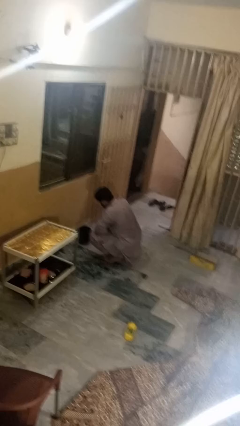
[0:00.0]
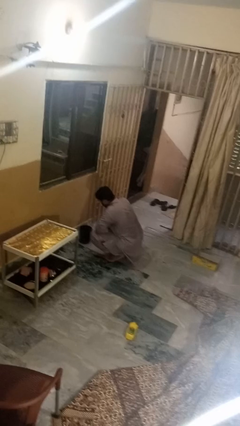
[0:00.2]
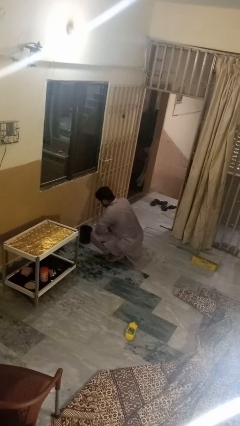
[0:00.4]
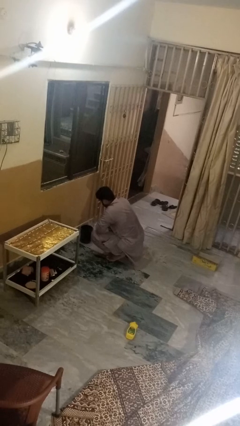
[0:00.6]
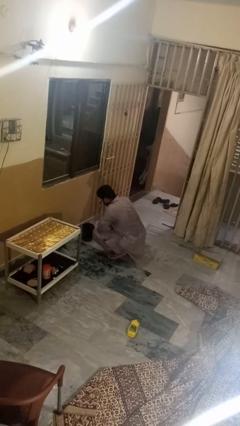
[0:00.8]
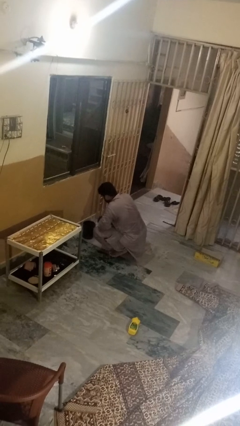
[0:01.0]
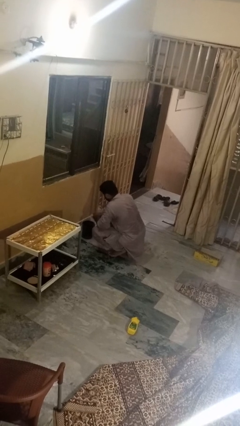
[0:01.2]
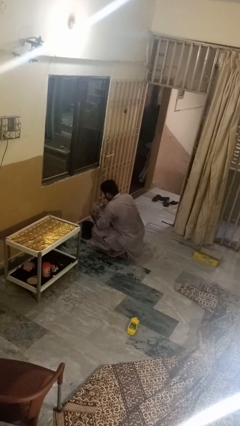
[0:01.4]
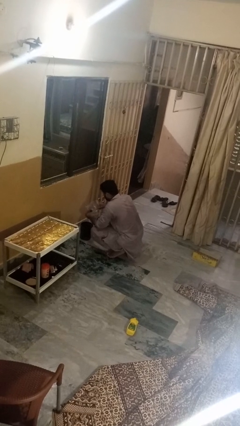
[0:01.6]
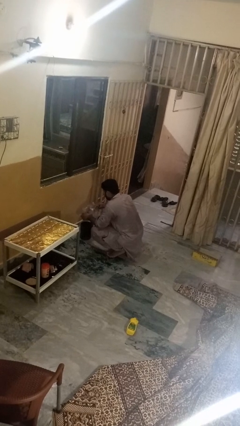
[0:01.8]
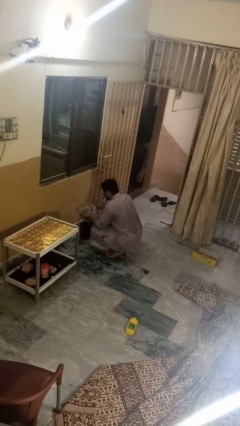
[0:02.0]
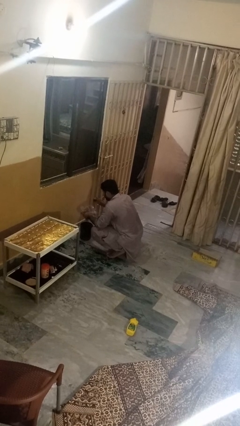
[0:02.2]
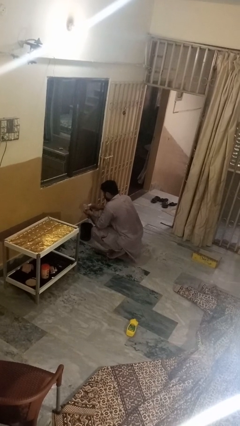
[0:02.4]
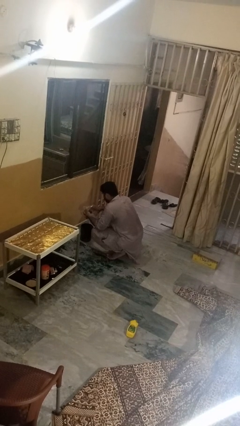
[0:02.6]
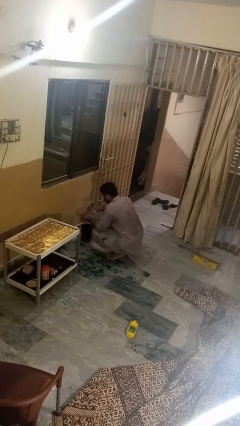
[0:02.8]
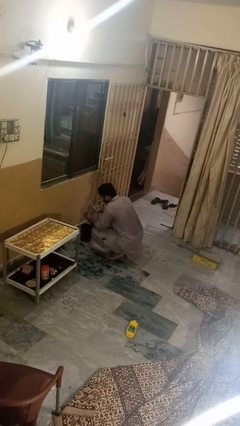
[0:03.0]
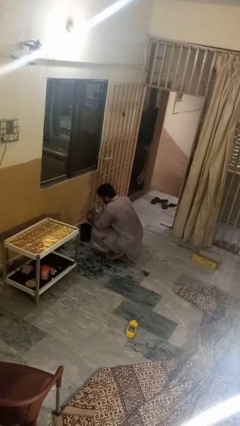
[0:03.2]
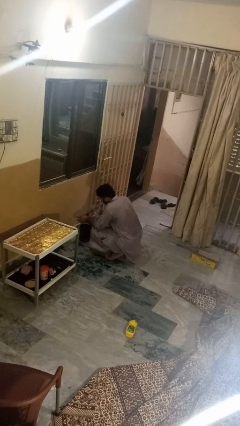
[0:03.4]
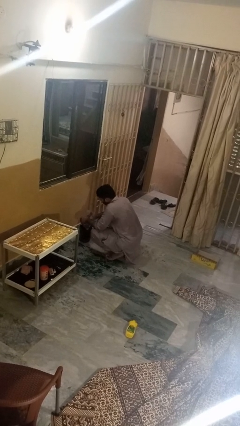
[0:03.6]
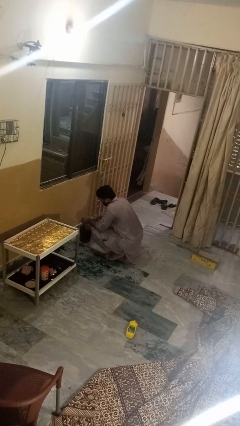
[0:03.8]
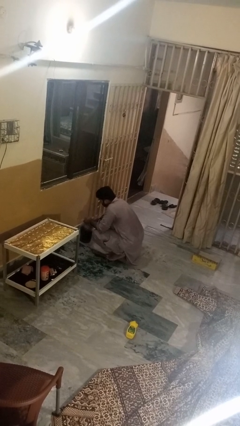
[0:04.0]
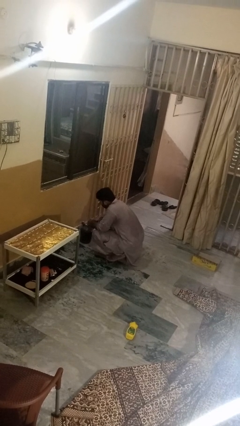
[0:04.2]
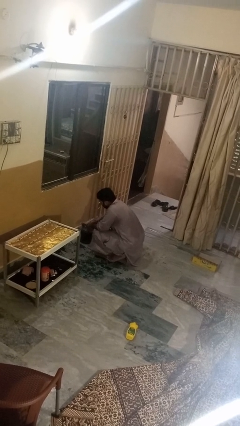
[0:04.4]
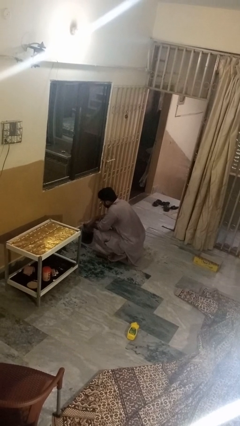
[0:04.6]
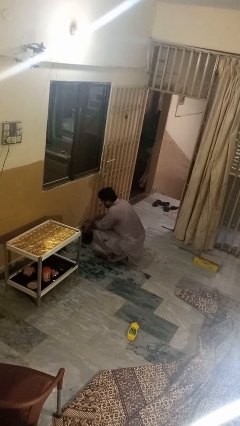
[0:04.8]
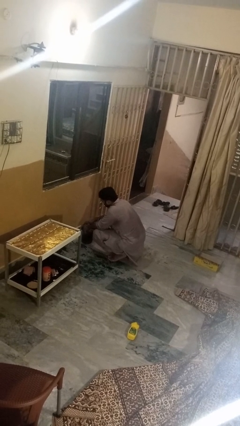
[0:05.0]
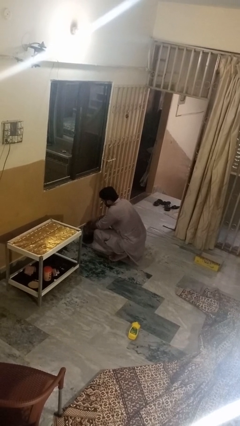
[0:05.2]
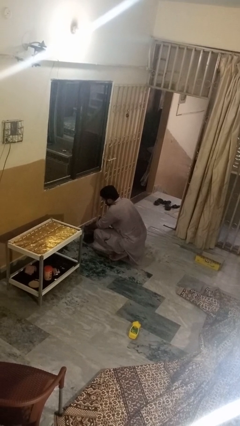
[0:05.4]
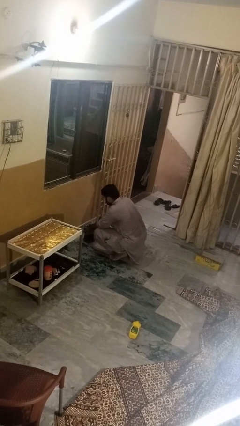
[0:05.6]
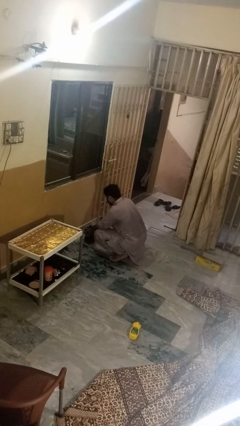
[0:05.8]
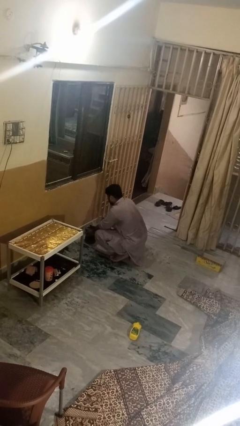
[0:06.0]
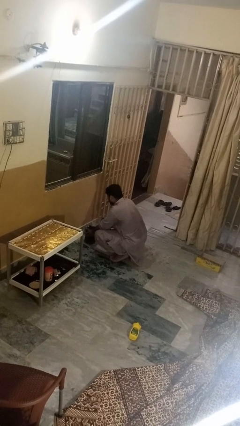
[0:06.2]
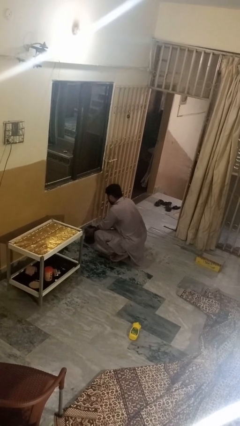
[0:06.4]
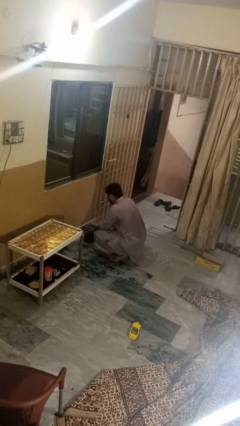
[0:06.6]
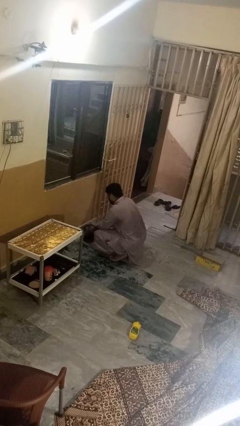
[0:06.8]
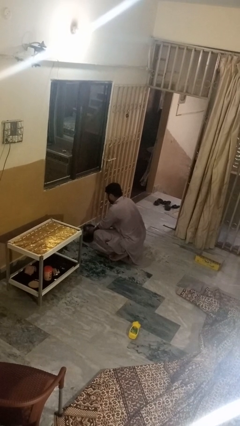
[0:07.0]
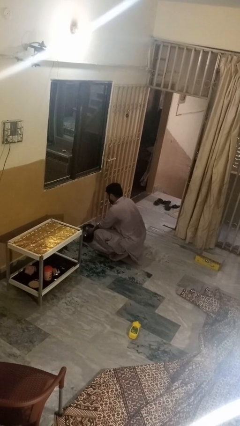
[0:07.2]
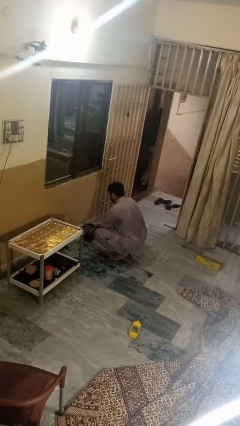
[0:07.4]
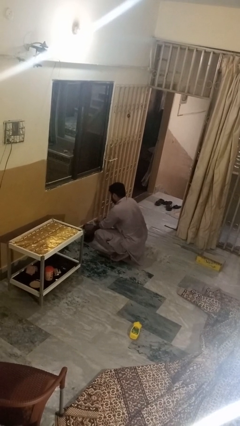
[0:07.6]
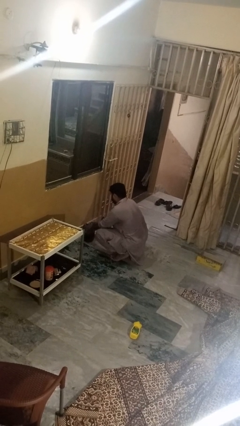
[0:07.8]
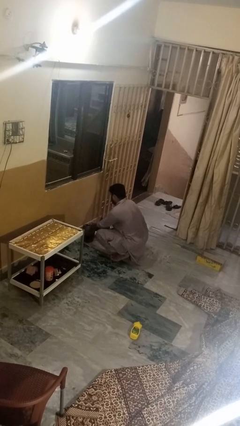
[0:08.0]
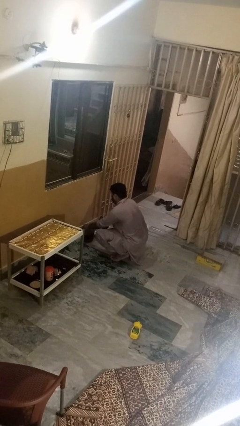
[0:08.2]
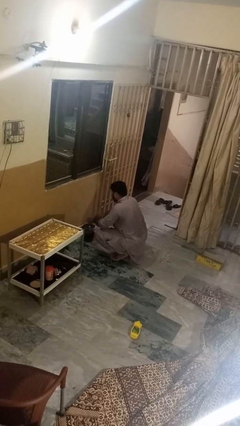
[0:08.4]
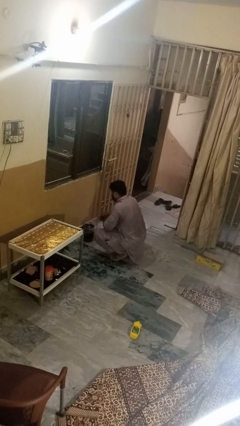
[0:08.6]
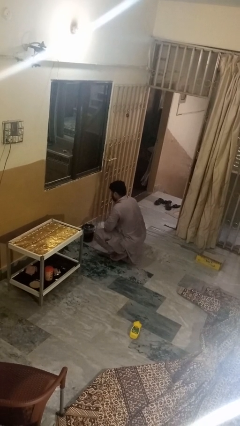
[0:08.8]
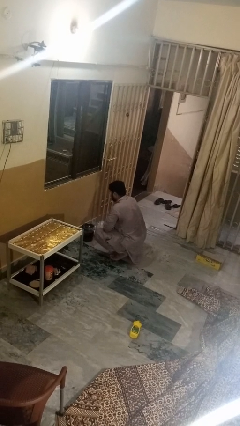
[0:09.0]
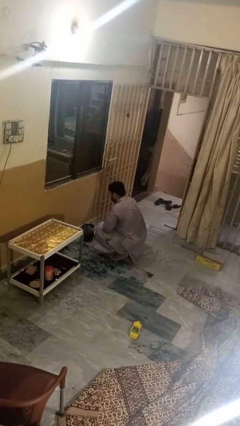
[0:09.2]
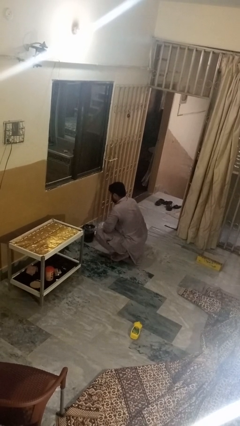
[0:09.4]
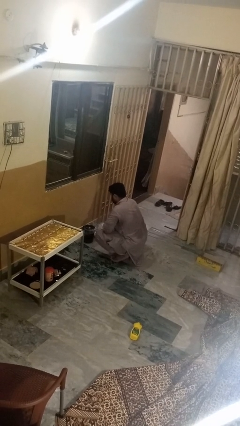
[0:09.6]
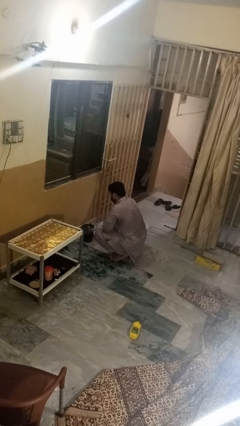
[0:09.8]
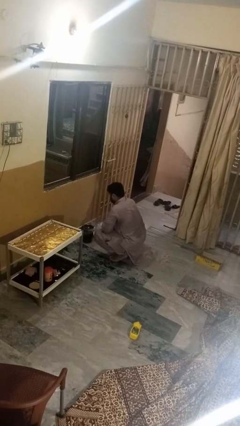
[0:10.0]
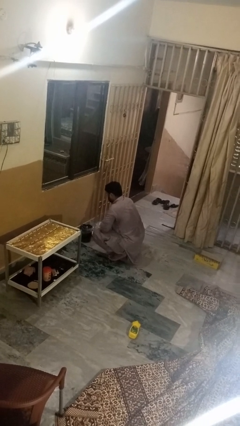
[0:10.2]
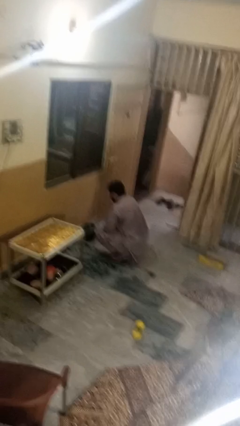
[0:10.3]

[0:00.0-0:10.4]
person inserts trashbag into trashcan

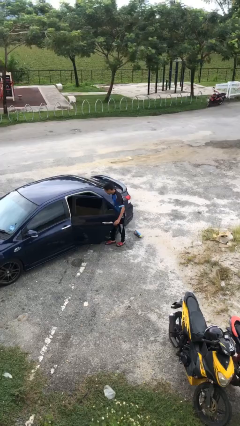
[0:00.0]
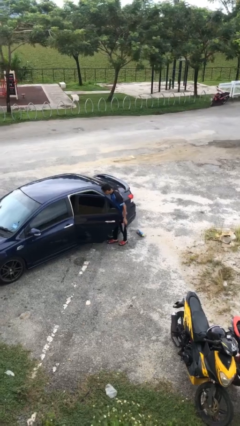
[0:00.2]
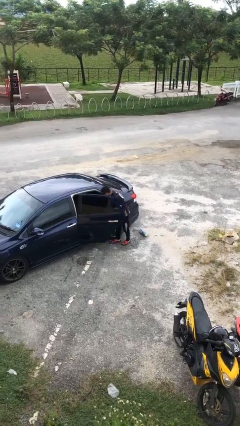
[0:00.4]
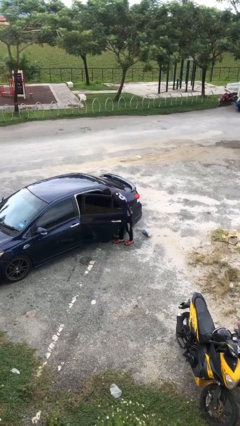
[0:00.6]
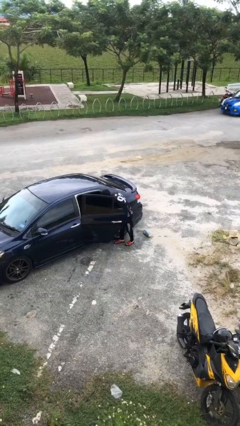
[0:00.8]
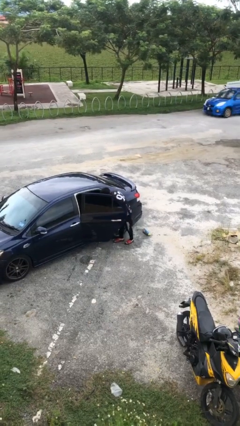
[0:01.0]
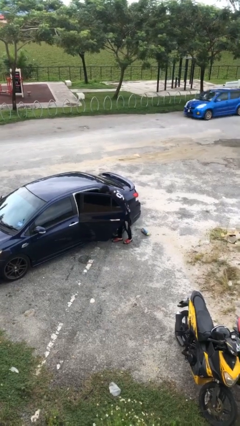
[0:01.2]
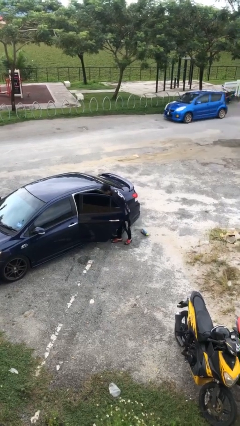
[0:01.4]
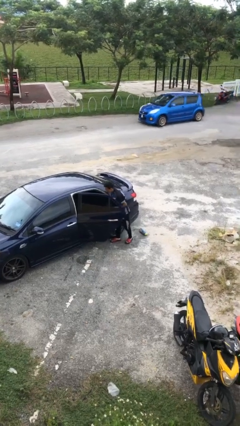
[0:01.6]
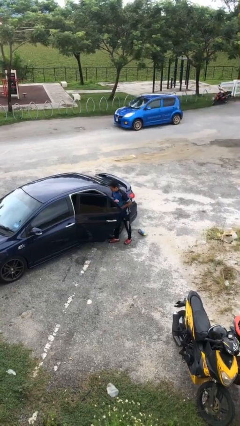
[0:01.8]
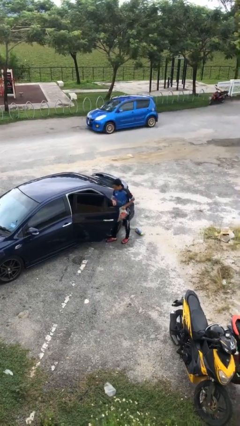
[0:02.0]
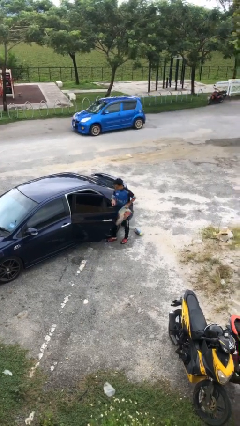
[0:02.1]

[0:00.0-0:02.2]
person unloads car

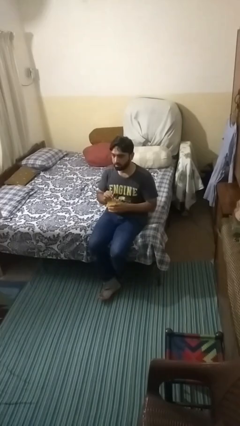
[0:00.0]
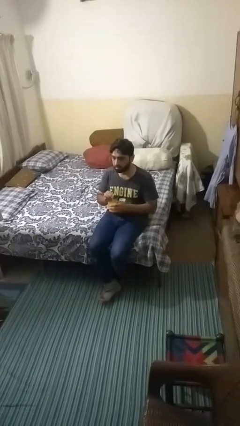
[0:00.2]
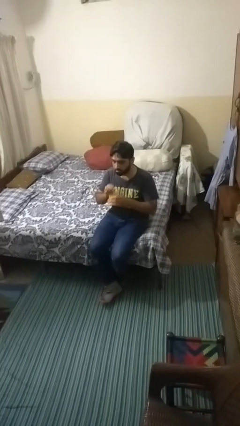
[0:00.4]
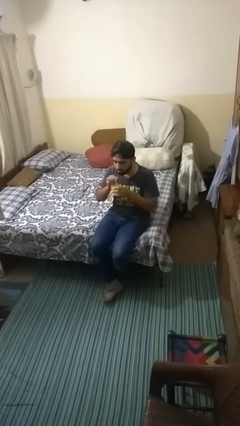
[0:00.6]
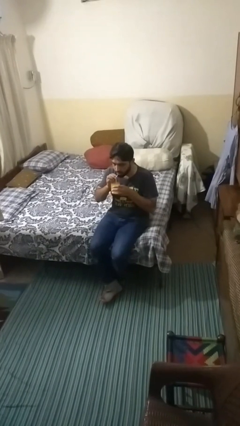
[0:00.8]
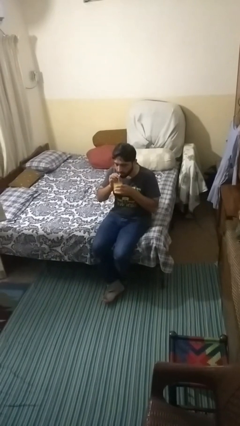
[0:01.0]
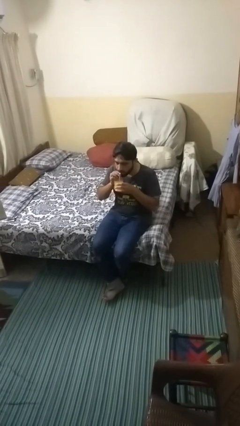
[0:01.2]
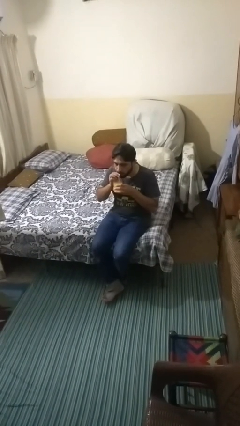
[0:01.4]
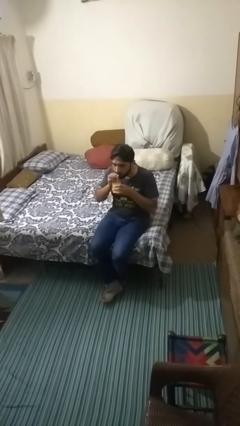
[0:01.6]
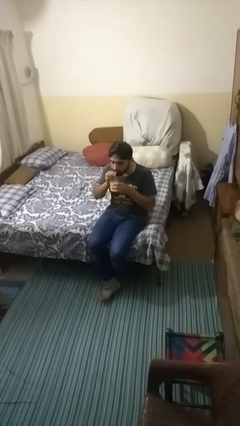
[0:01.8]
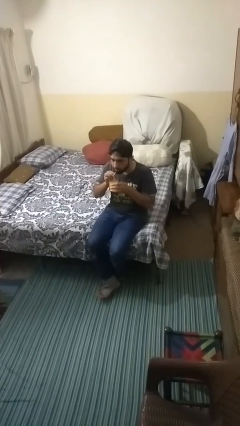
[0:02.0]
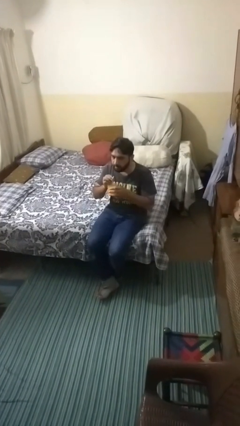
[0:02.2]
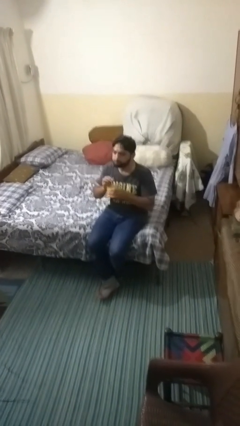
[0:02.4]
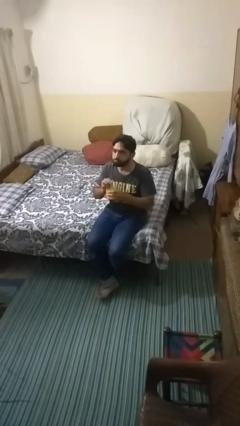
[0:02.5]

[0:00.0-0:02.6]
person drinks from straw

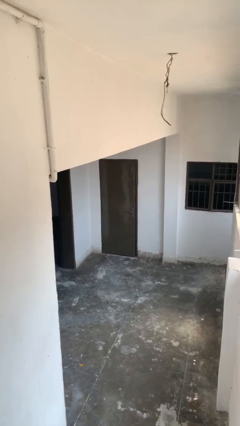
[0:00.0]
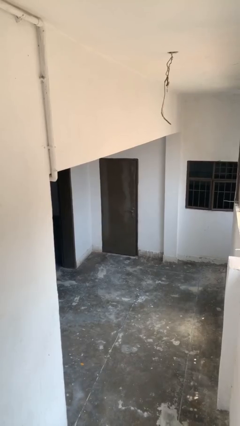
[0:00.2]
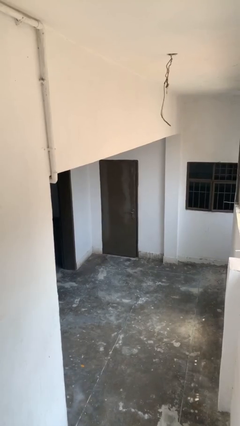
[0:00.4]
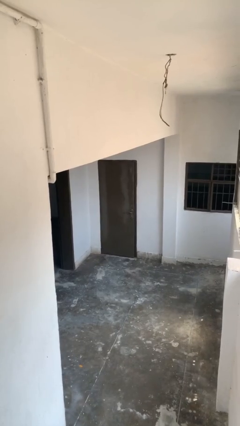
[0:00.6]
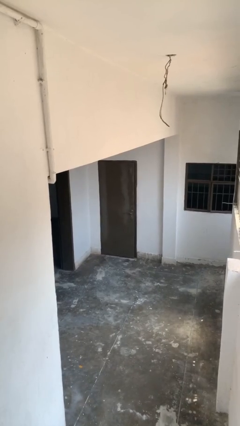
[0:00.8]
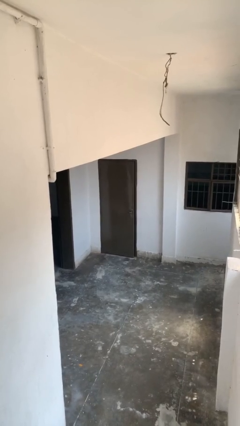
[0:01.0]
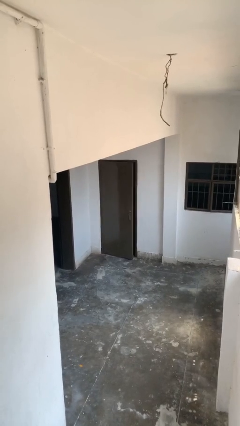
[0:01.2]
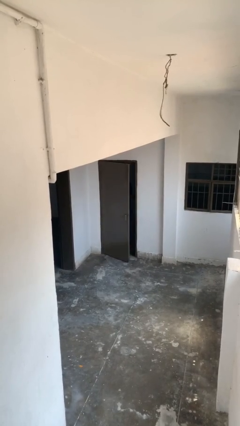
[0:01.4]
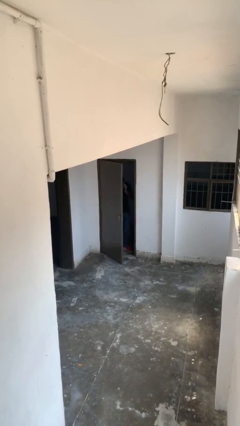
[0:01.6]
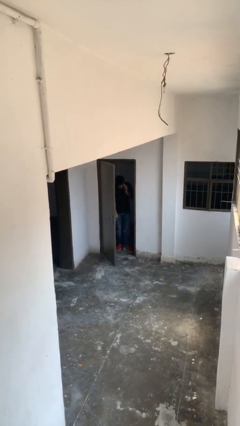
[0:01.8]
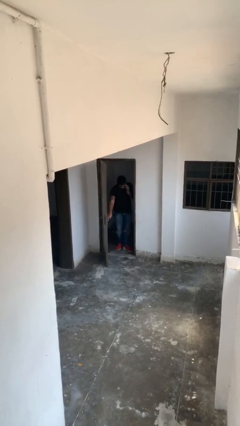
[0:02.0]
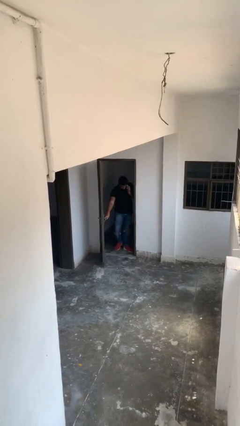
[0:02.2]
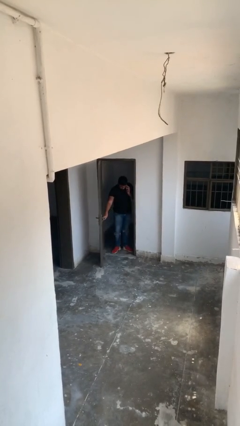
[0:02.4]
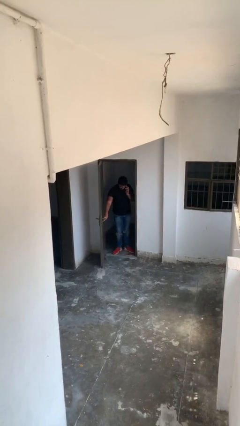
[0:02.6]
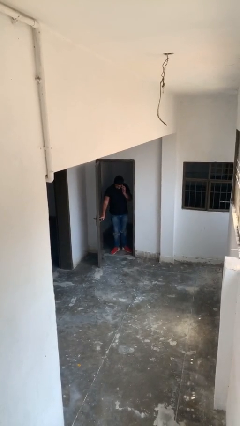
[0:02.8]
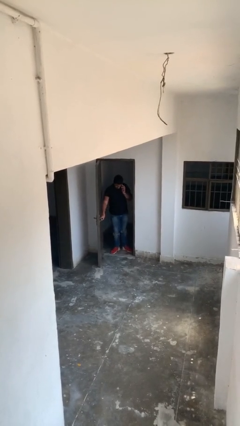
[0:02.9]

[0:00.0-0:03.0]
person opens facility door
